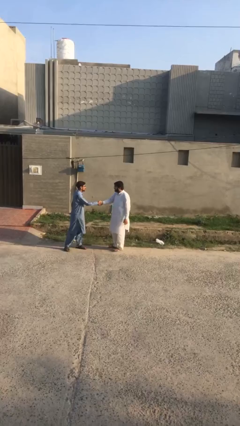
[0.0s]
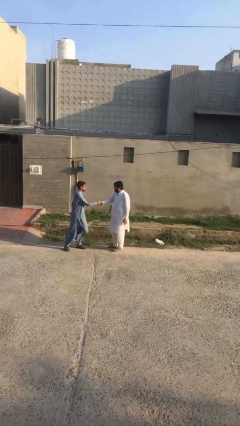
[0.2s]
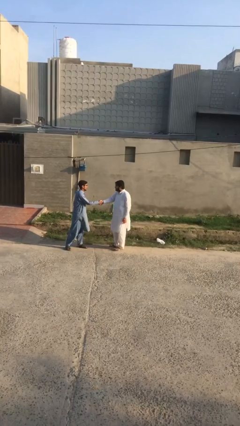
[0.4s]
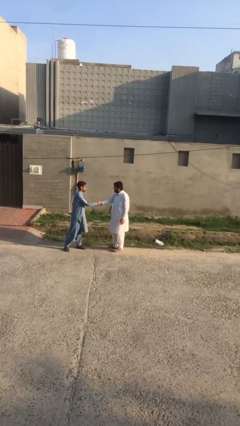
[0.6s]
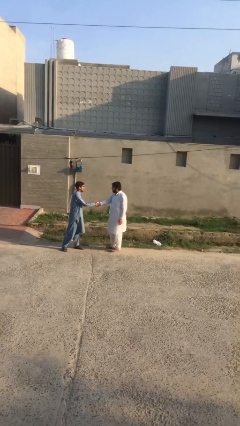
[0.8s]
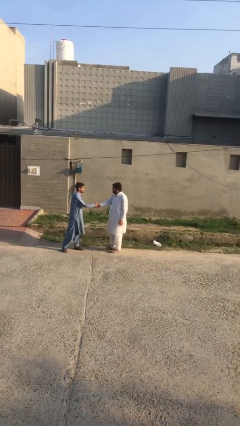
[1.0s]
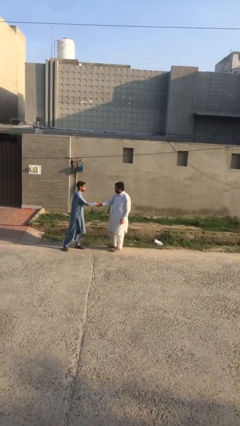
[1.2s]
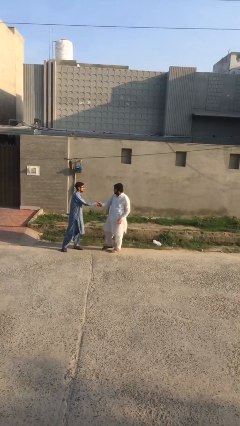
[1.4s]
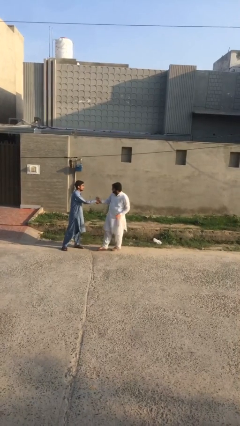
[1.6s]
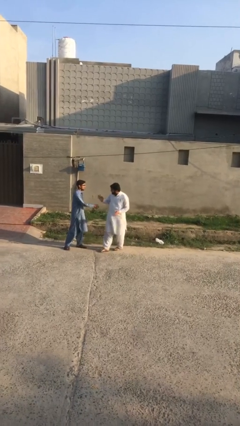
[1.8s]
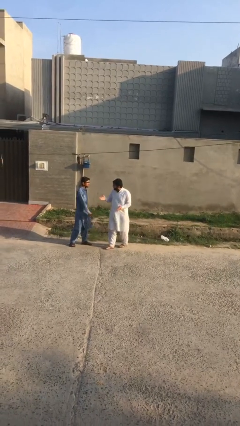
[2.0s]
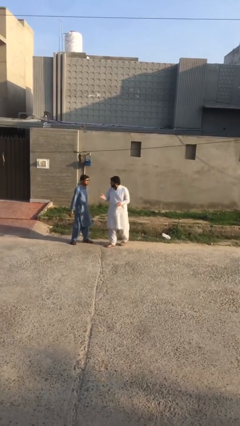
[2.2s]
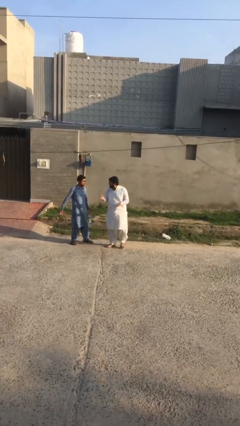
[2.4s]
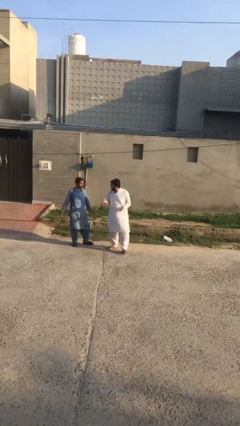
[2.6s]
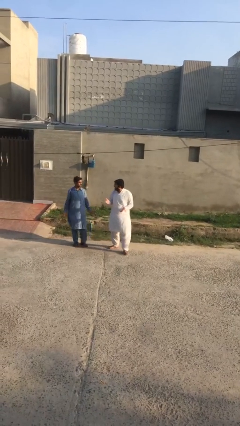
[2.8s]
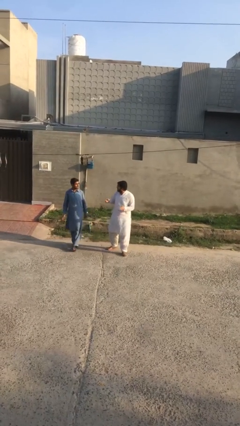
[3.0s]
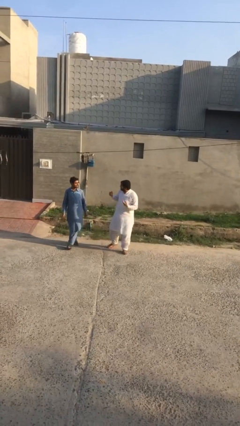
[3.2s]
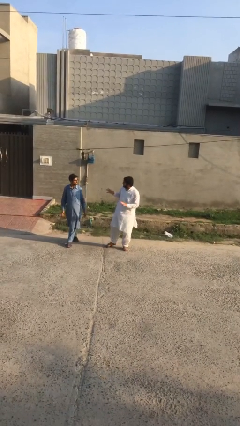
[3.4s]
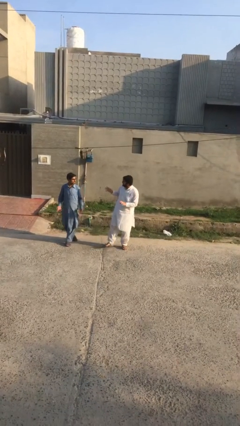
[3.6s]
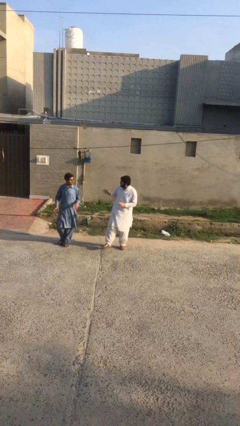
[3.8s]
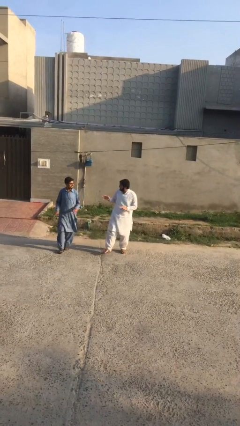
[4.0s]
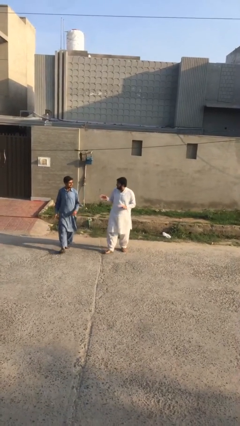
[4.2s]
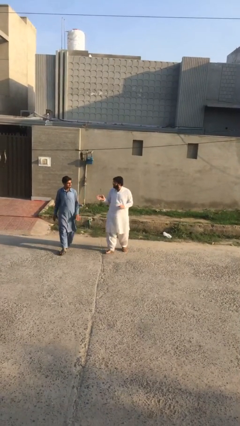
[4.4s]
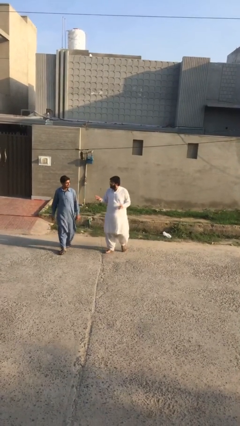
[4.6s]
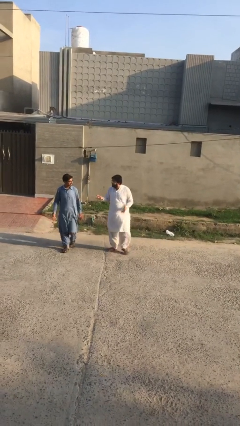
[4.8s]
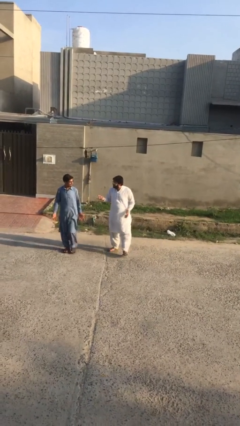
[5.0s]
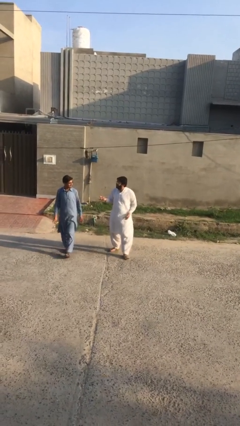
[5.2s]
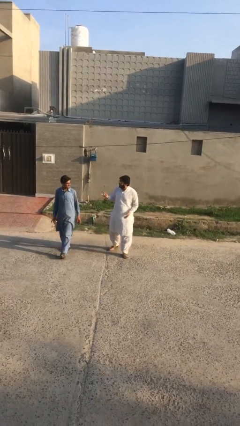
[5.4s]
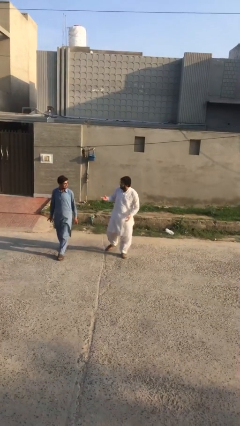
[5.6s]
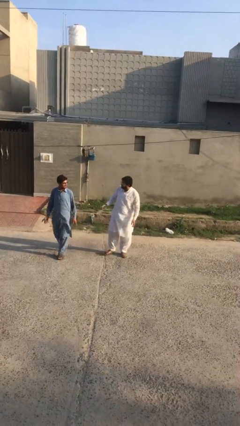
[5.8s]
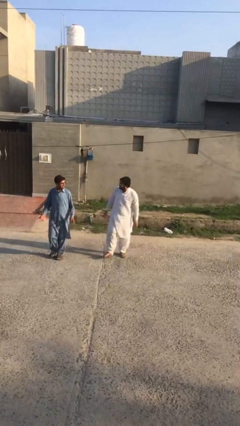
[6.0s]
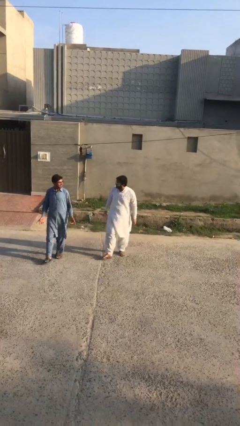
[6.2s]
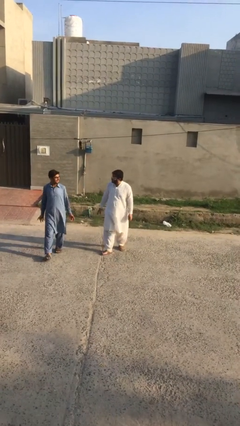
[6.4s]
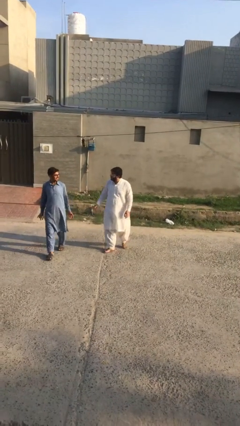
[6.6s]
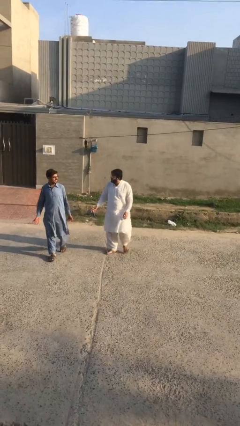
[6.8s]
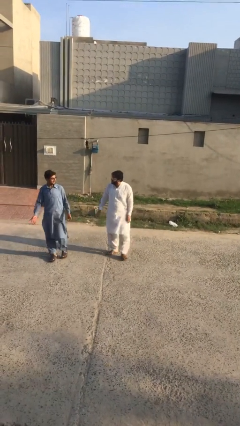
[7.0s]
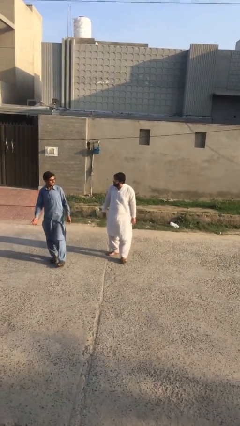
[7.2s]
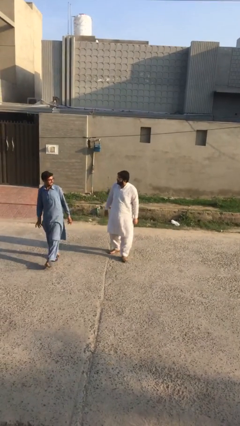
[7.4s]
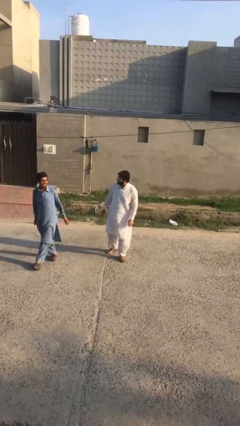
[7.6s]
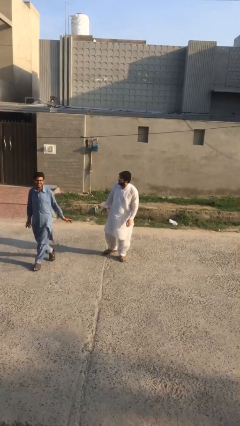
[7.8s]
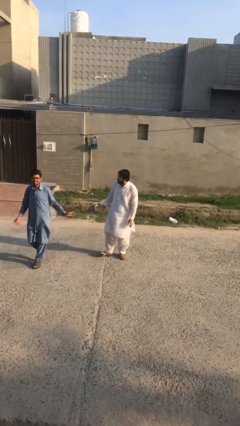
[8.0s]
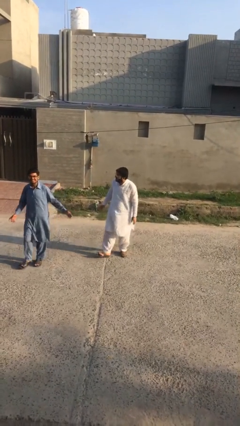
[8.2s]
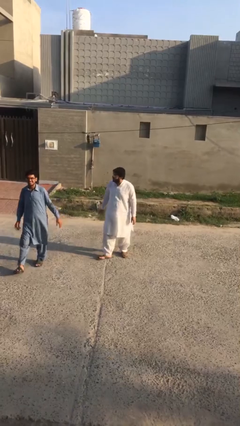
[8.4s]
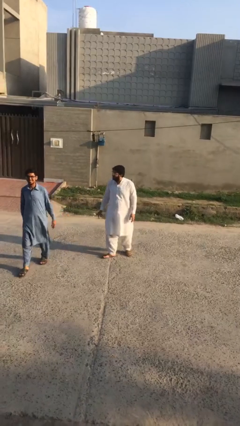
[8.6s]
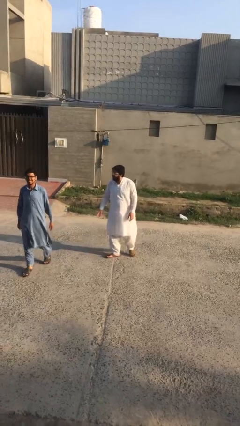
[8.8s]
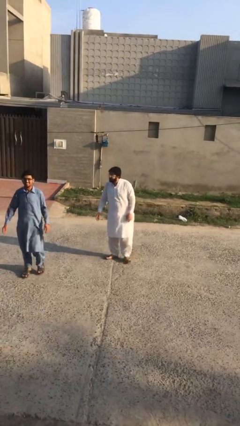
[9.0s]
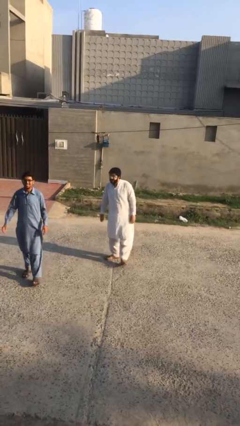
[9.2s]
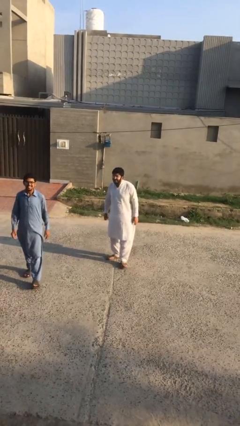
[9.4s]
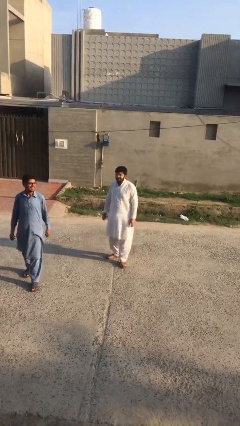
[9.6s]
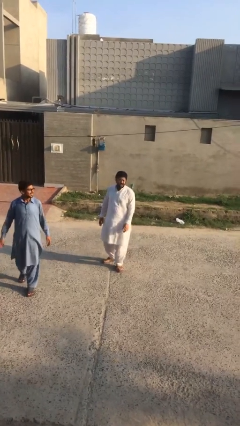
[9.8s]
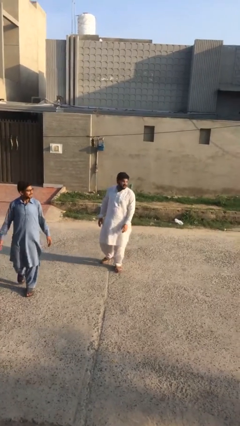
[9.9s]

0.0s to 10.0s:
person talks to person

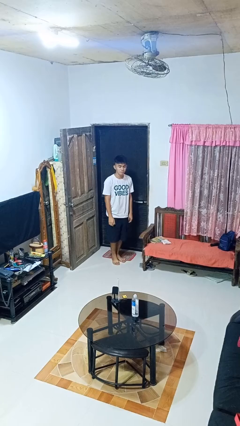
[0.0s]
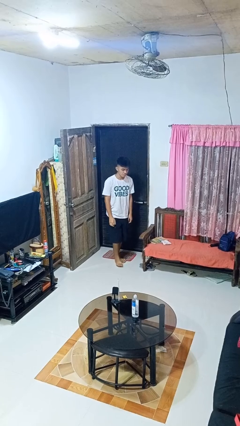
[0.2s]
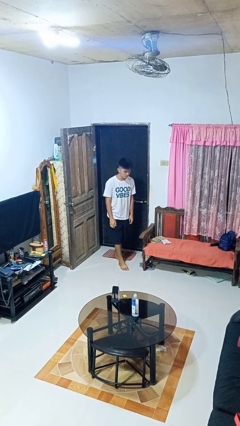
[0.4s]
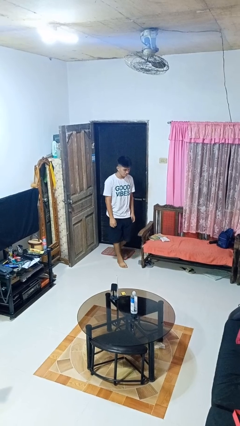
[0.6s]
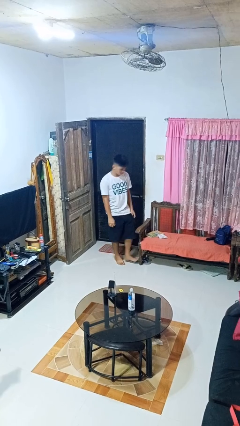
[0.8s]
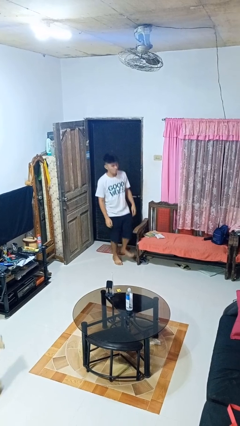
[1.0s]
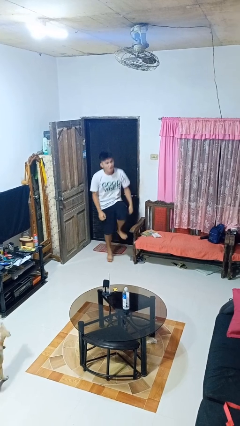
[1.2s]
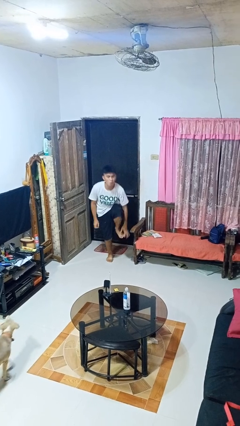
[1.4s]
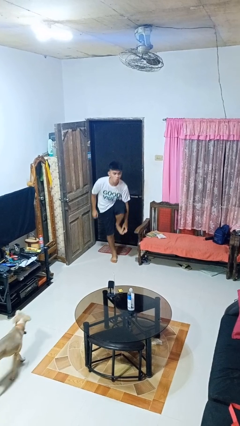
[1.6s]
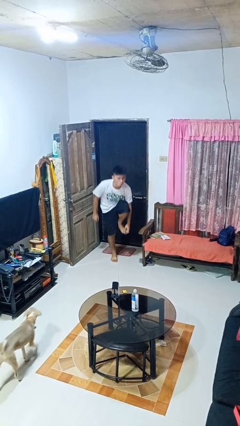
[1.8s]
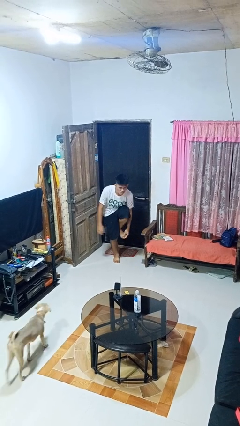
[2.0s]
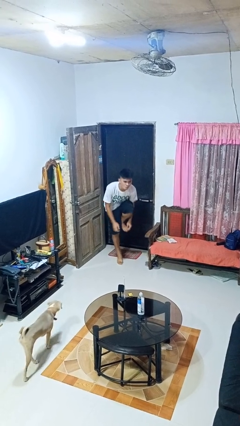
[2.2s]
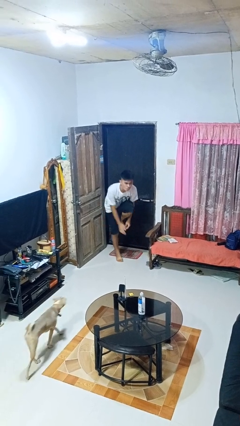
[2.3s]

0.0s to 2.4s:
person stubs toe

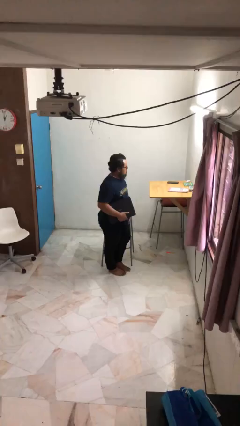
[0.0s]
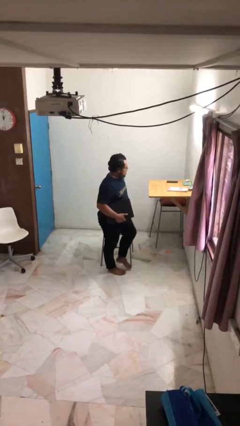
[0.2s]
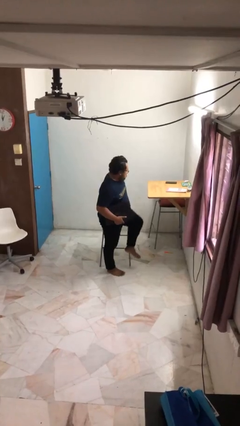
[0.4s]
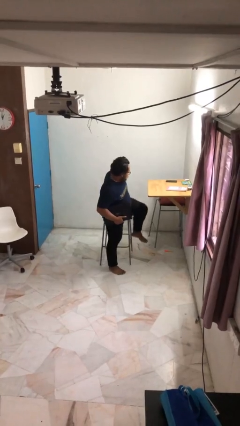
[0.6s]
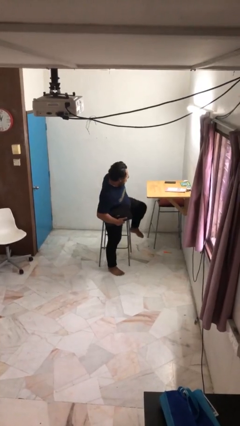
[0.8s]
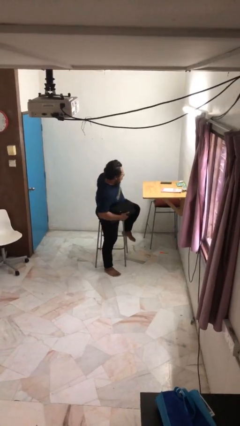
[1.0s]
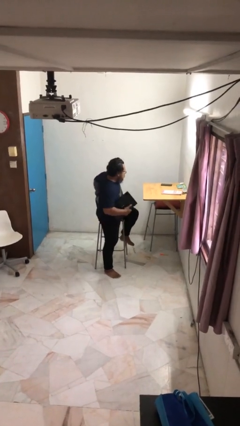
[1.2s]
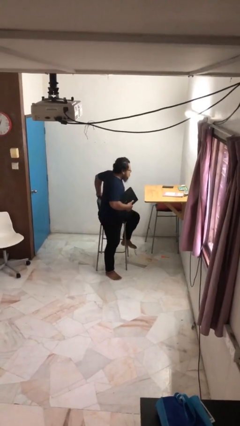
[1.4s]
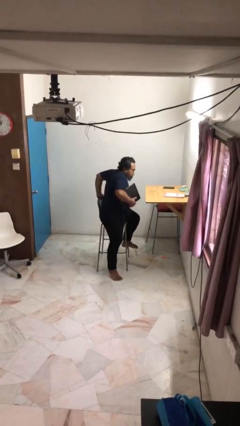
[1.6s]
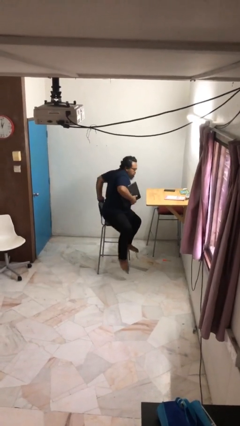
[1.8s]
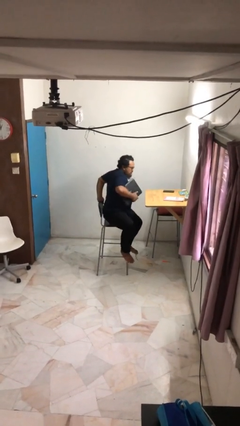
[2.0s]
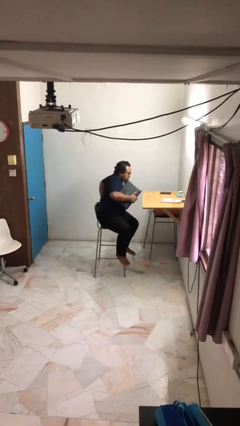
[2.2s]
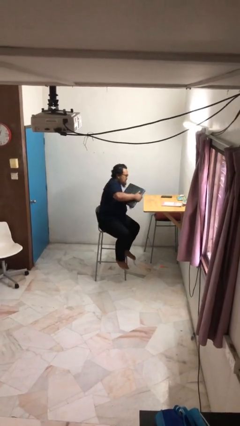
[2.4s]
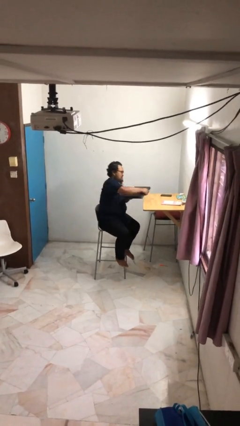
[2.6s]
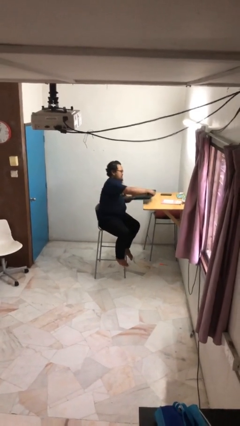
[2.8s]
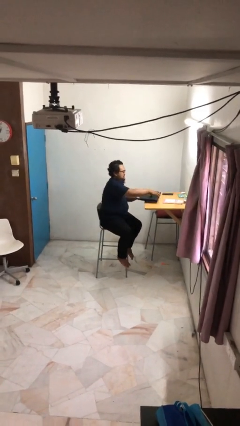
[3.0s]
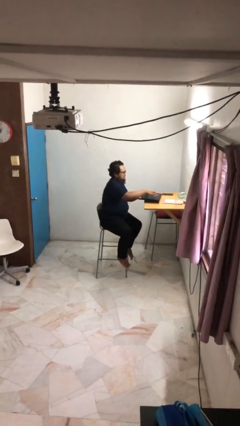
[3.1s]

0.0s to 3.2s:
person sits down

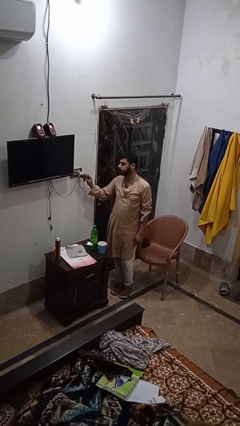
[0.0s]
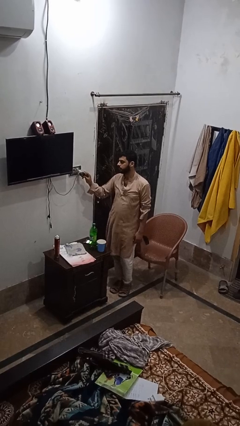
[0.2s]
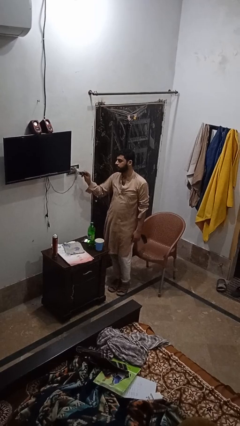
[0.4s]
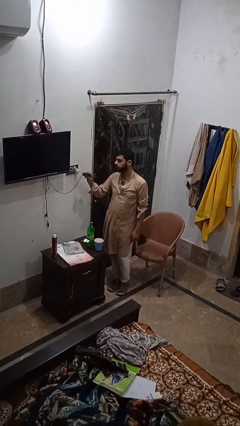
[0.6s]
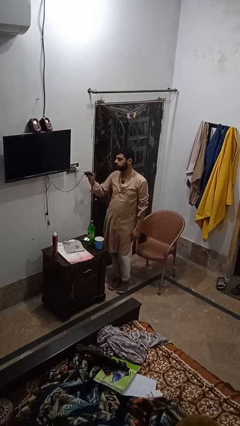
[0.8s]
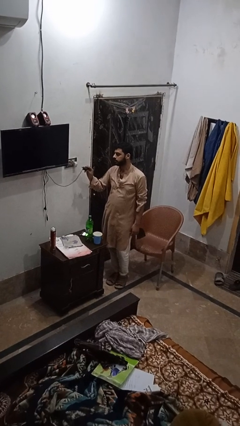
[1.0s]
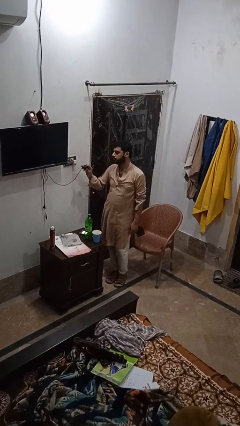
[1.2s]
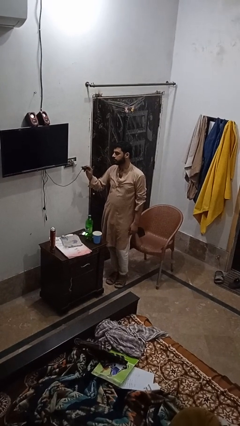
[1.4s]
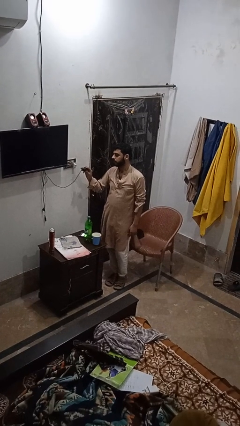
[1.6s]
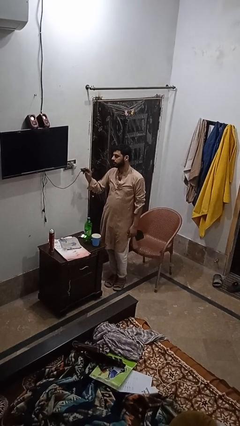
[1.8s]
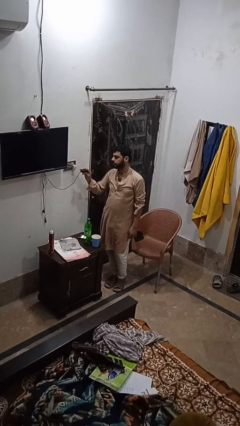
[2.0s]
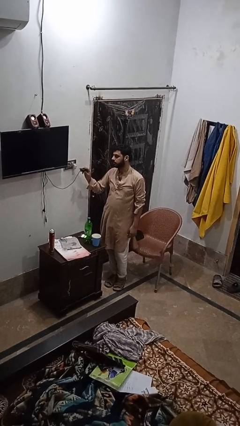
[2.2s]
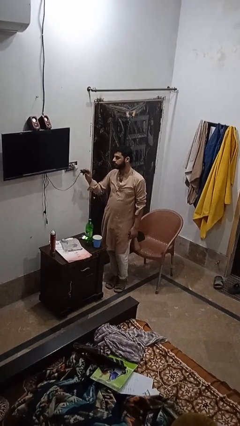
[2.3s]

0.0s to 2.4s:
person unplugs from electrical socket
